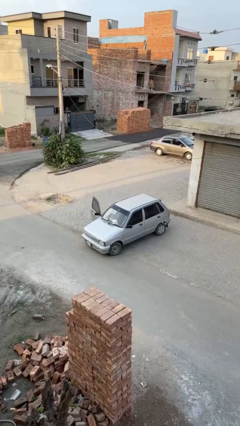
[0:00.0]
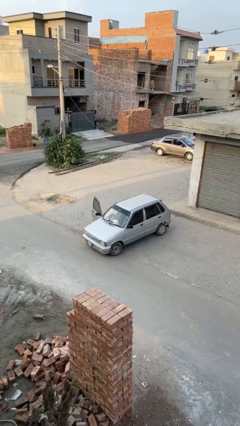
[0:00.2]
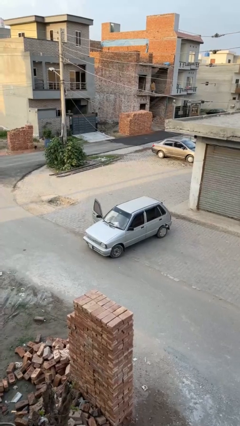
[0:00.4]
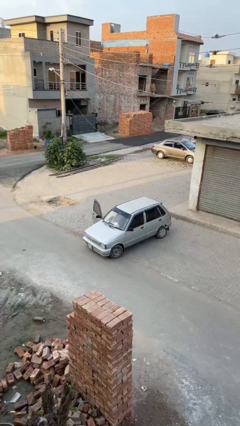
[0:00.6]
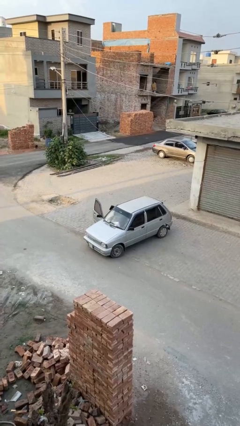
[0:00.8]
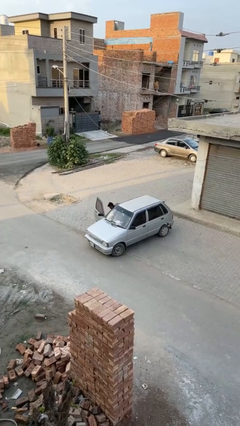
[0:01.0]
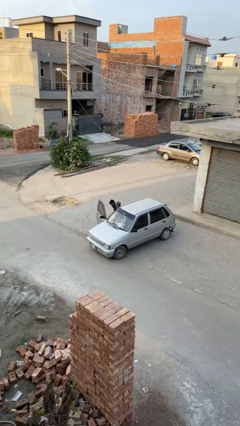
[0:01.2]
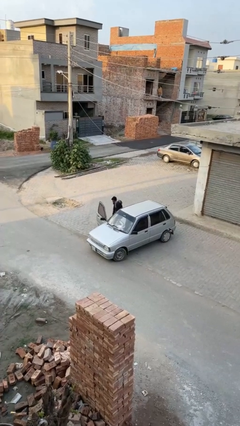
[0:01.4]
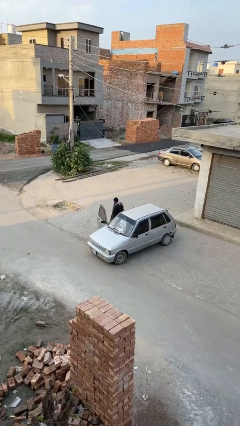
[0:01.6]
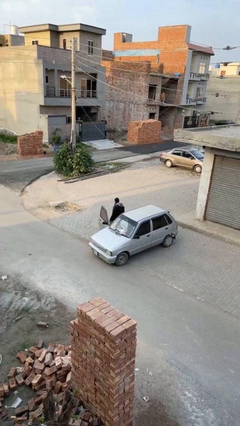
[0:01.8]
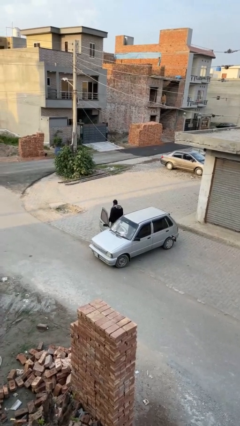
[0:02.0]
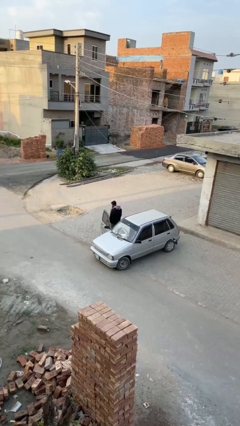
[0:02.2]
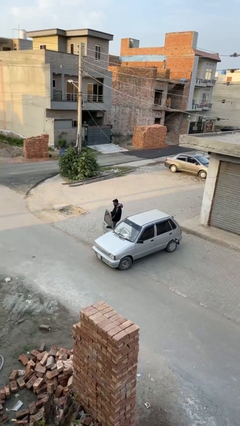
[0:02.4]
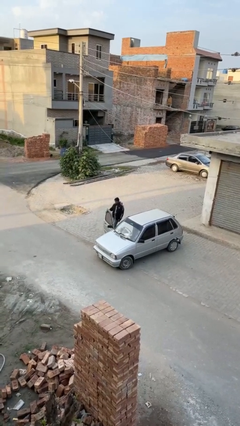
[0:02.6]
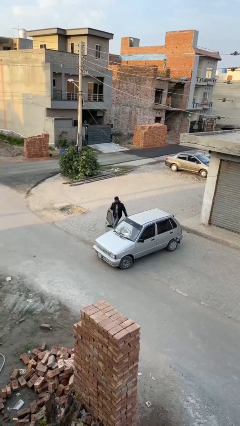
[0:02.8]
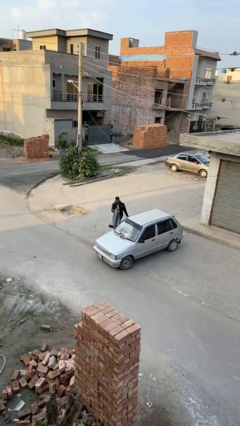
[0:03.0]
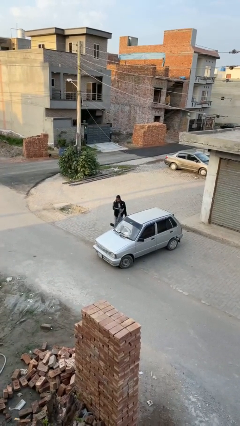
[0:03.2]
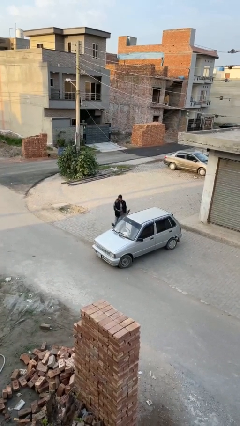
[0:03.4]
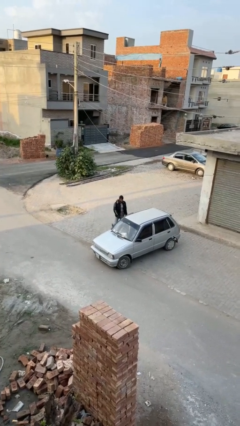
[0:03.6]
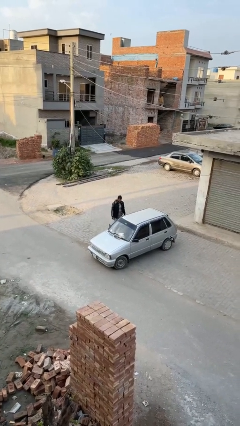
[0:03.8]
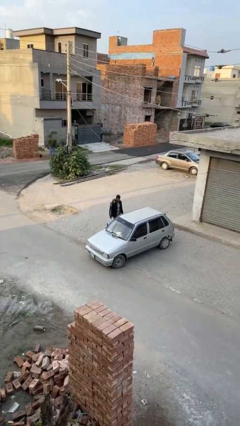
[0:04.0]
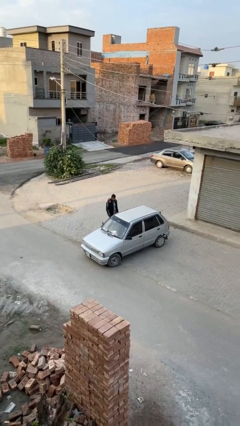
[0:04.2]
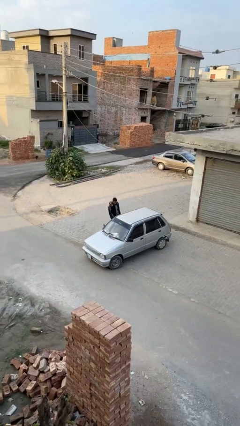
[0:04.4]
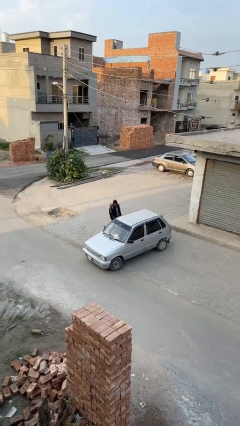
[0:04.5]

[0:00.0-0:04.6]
person exits car

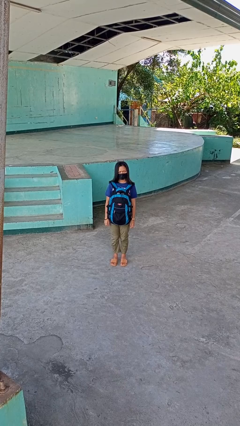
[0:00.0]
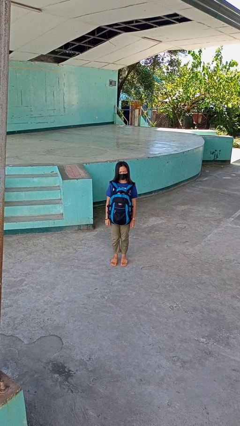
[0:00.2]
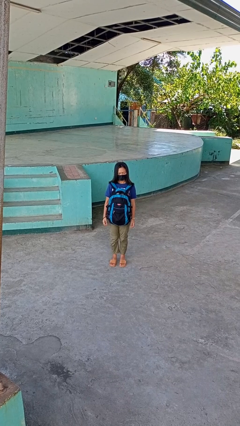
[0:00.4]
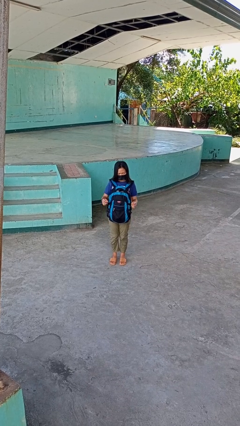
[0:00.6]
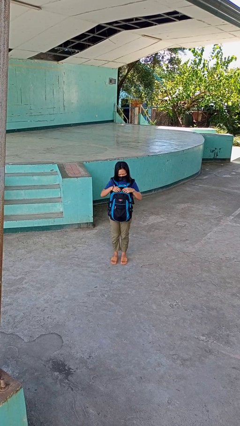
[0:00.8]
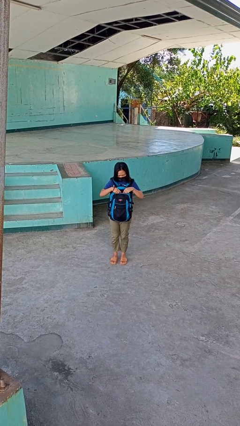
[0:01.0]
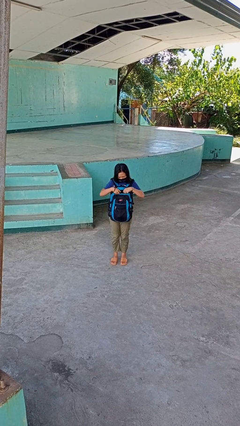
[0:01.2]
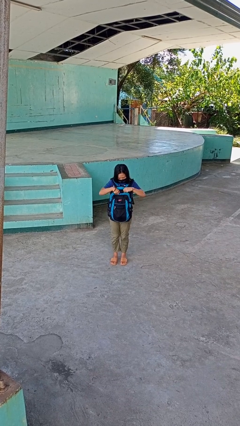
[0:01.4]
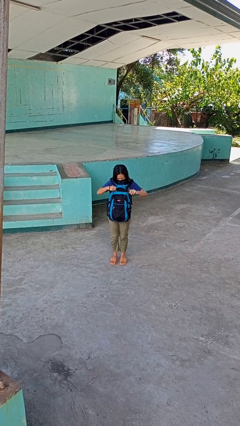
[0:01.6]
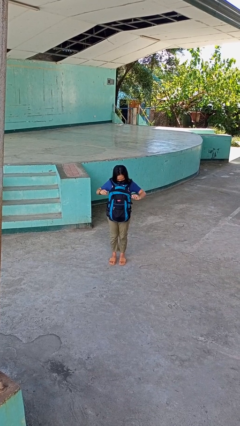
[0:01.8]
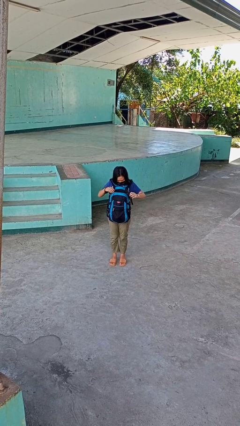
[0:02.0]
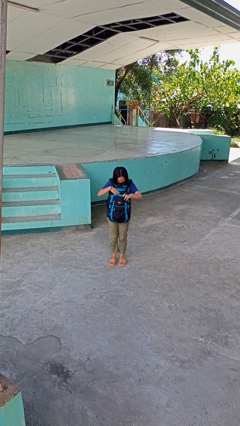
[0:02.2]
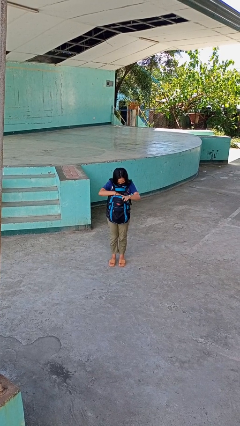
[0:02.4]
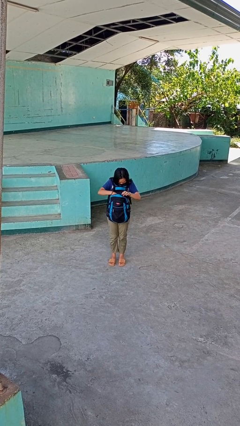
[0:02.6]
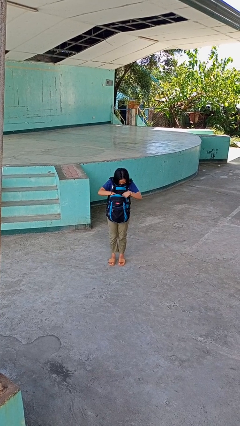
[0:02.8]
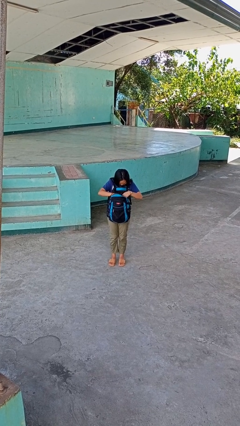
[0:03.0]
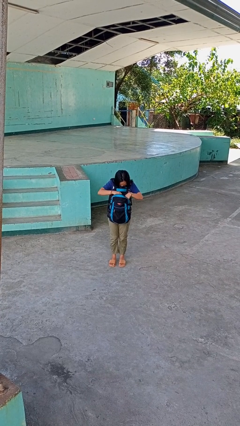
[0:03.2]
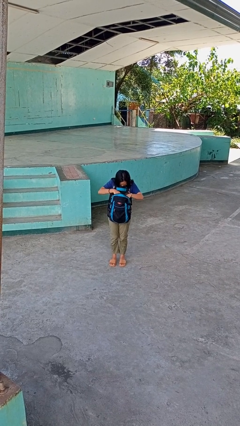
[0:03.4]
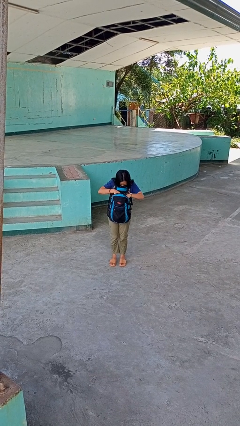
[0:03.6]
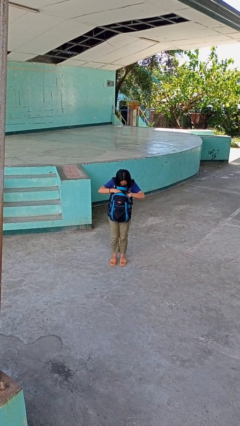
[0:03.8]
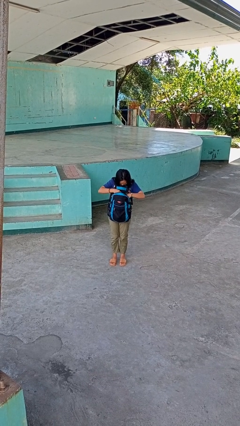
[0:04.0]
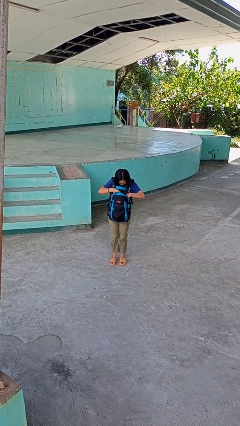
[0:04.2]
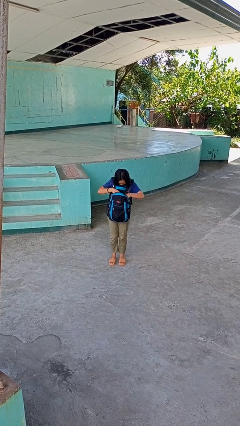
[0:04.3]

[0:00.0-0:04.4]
person searches in backpack

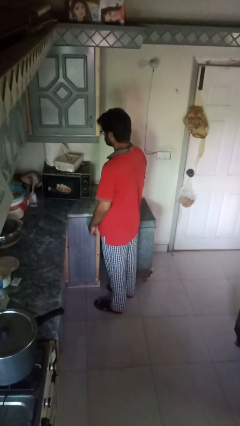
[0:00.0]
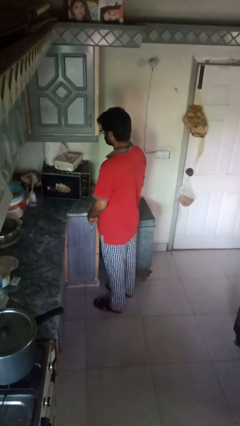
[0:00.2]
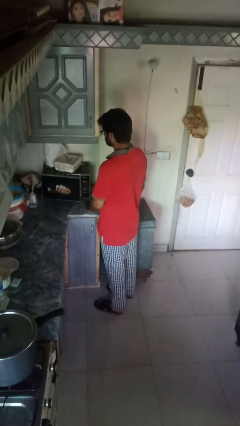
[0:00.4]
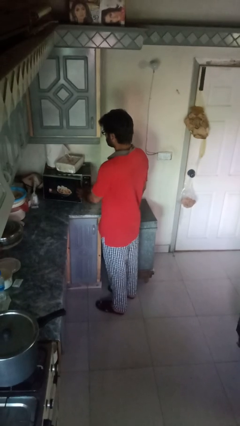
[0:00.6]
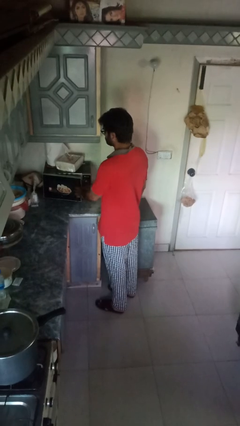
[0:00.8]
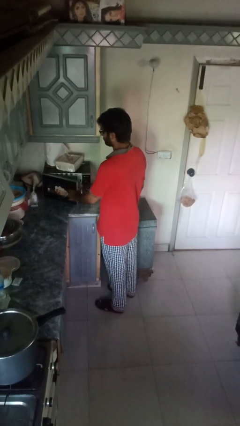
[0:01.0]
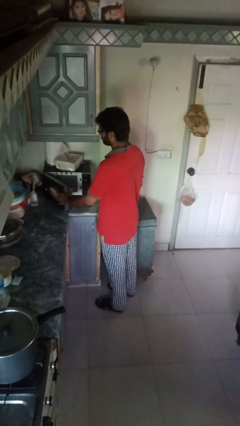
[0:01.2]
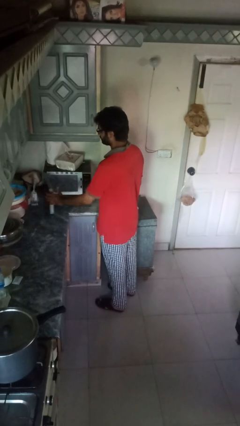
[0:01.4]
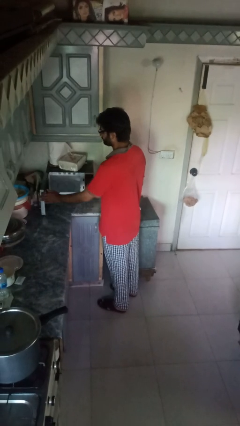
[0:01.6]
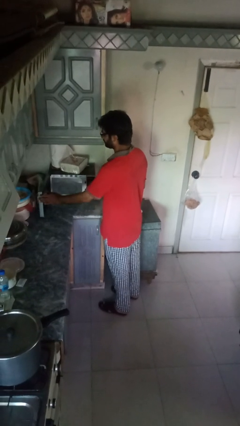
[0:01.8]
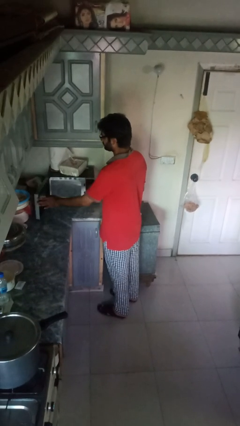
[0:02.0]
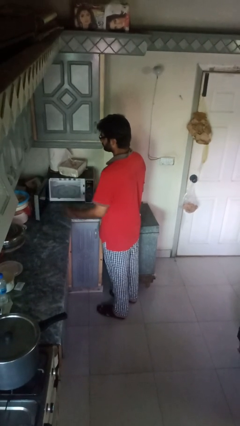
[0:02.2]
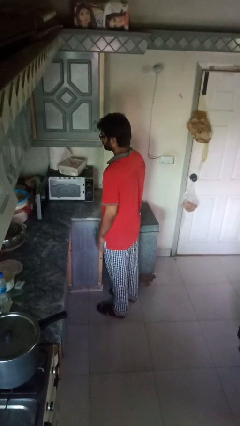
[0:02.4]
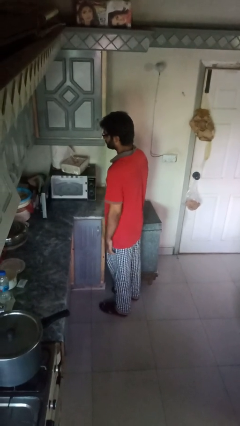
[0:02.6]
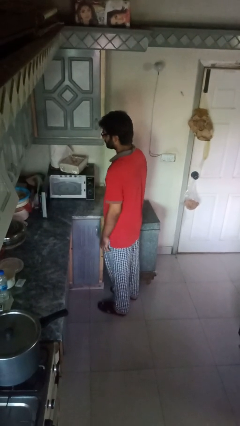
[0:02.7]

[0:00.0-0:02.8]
person opens oven door

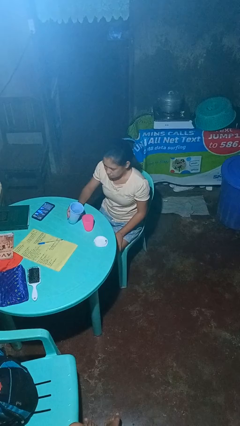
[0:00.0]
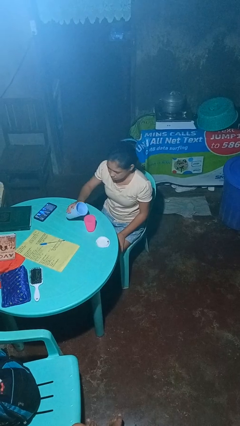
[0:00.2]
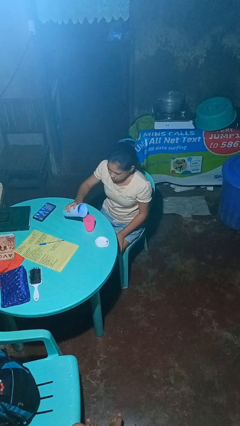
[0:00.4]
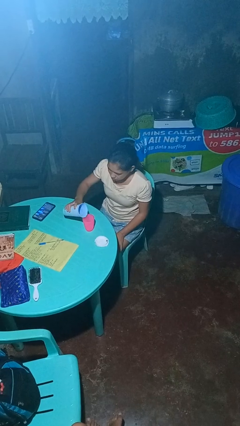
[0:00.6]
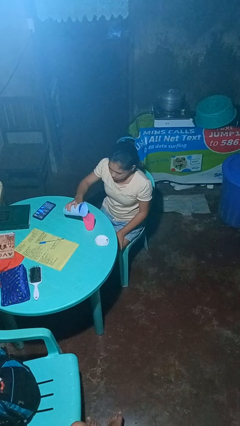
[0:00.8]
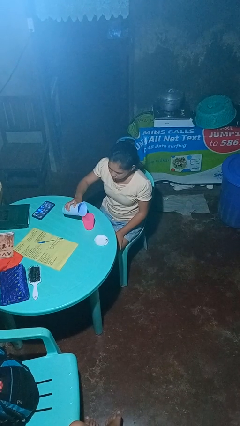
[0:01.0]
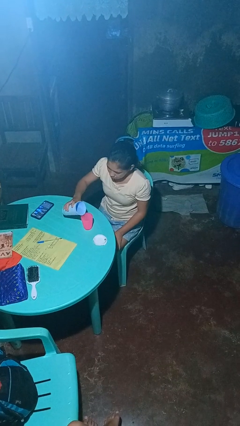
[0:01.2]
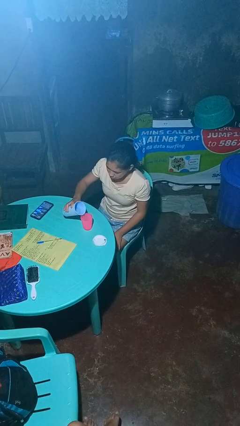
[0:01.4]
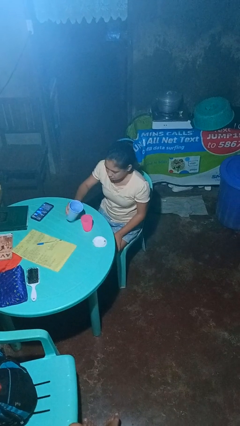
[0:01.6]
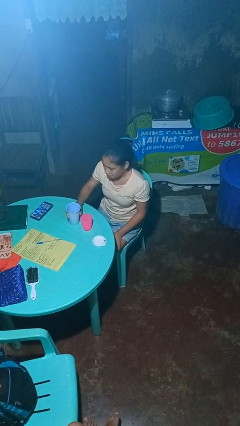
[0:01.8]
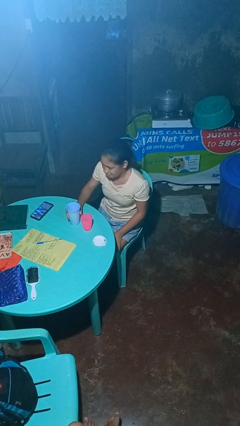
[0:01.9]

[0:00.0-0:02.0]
person pours liquid into cup

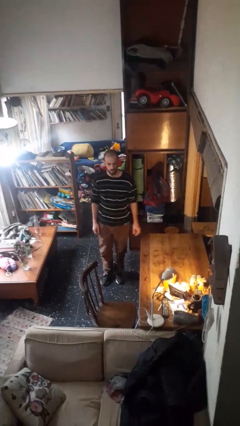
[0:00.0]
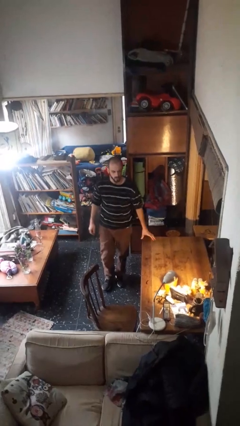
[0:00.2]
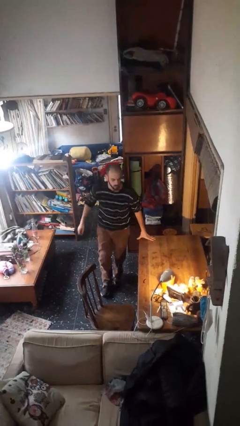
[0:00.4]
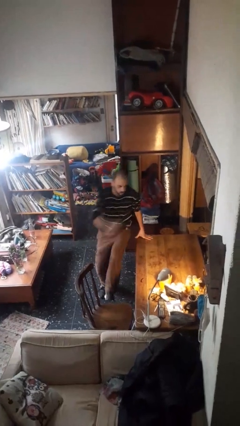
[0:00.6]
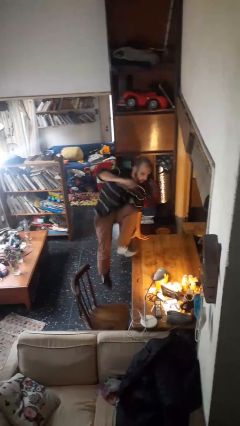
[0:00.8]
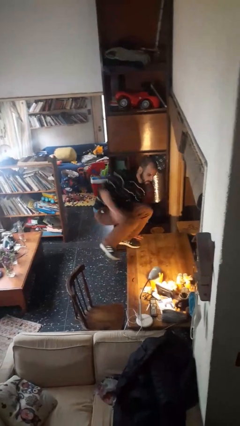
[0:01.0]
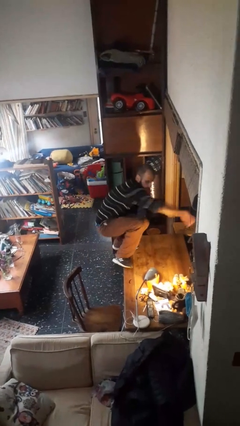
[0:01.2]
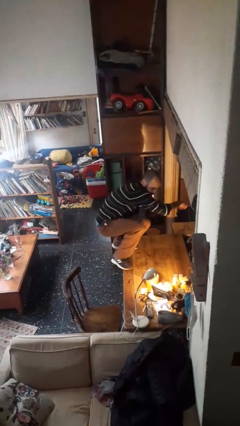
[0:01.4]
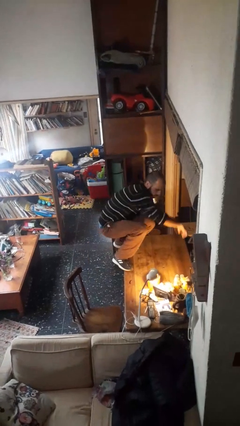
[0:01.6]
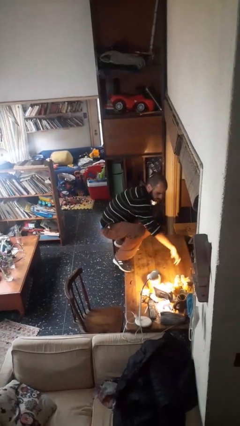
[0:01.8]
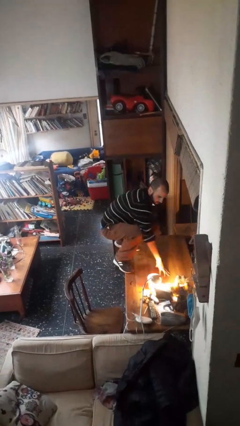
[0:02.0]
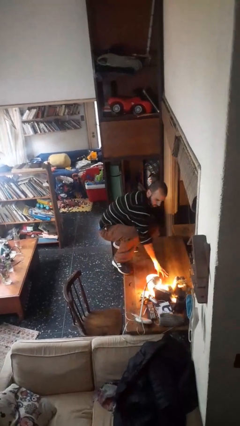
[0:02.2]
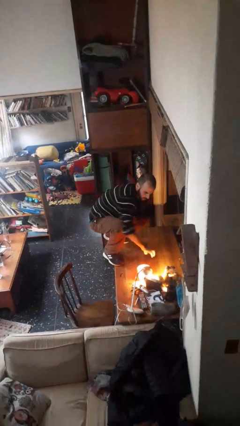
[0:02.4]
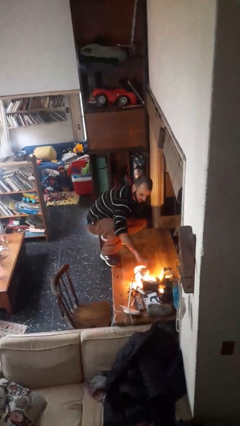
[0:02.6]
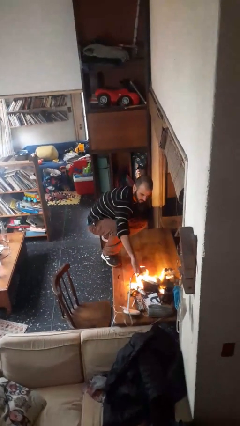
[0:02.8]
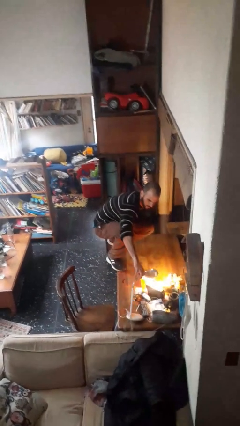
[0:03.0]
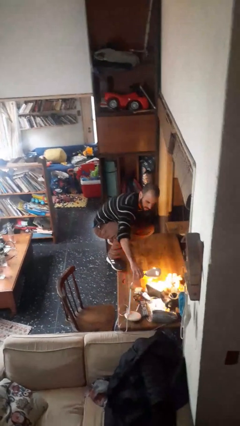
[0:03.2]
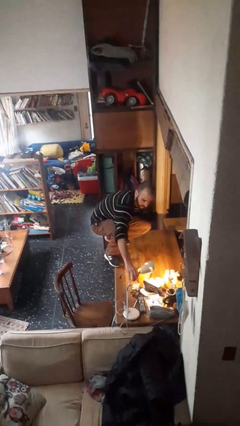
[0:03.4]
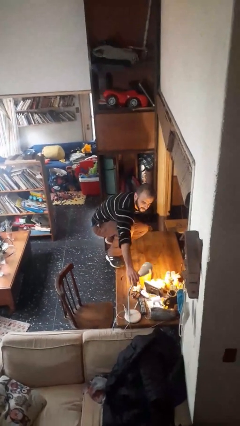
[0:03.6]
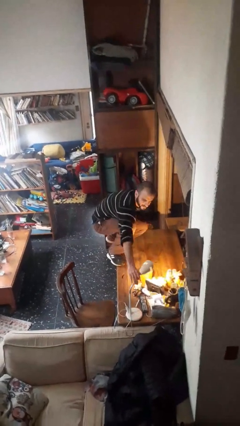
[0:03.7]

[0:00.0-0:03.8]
person climbs on table
